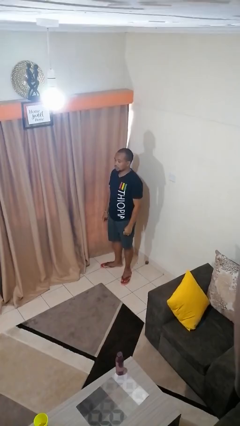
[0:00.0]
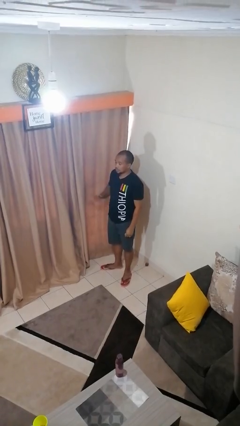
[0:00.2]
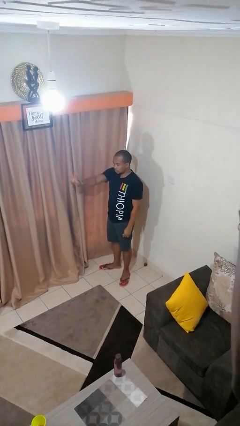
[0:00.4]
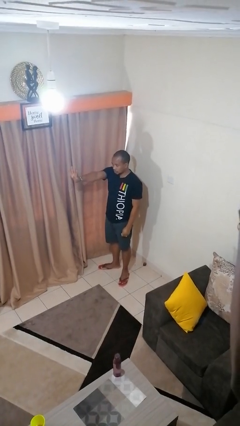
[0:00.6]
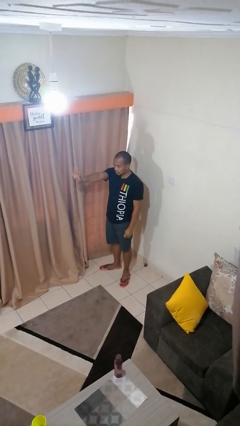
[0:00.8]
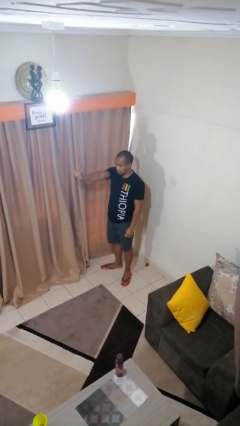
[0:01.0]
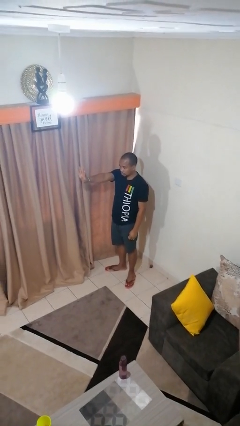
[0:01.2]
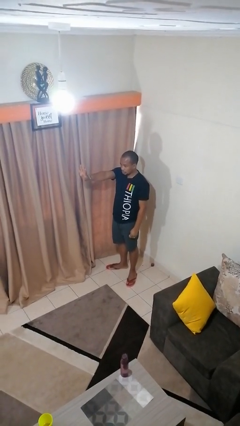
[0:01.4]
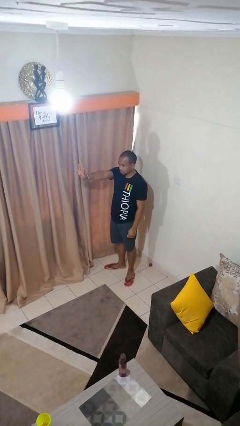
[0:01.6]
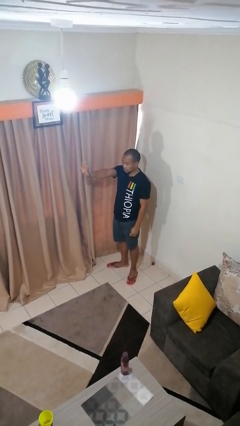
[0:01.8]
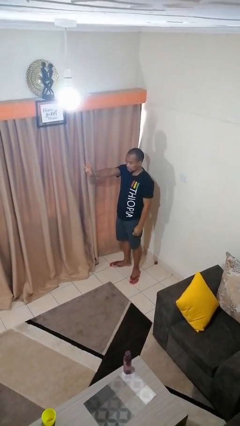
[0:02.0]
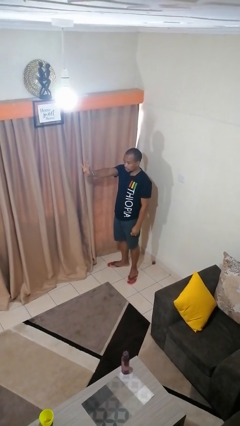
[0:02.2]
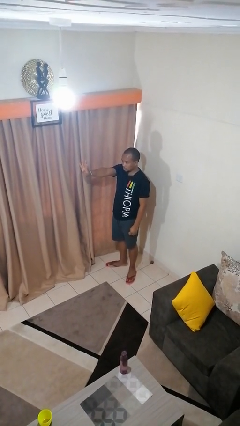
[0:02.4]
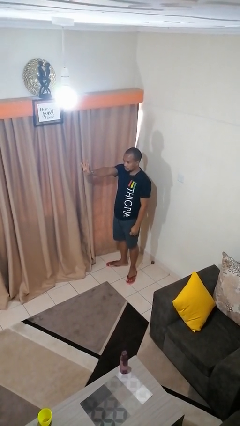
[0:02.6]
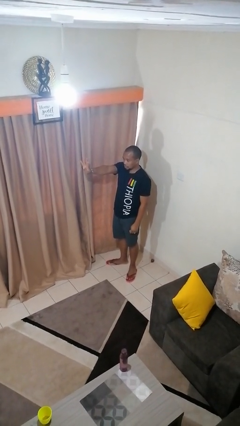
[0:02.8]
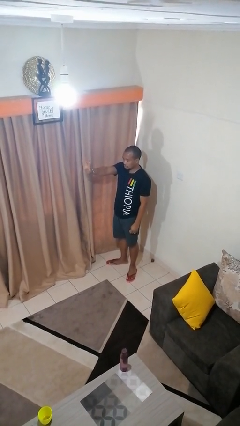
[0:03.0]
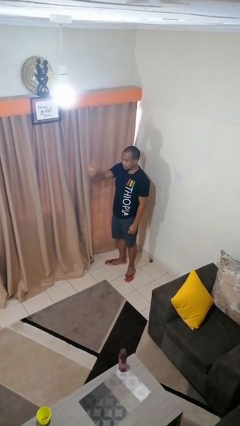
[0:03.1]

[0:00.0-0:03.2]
person gestures number four

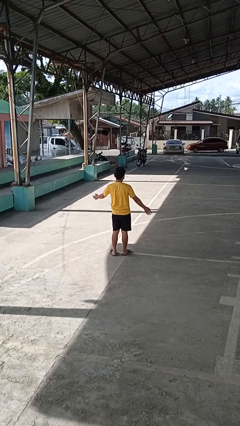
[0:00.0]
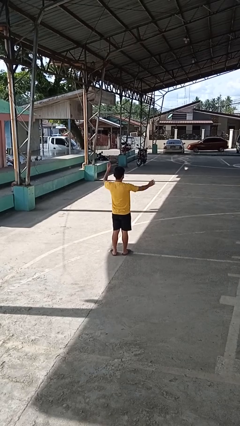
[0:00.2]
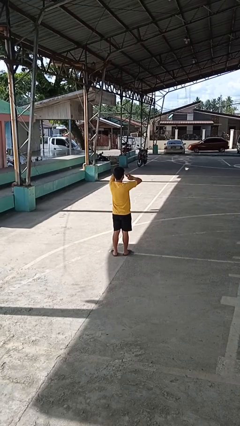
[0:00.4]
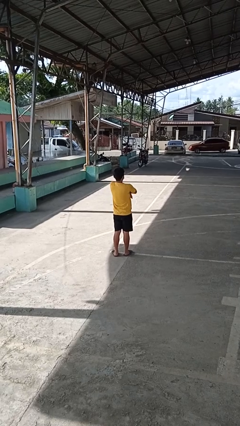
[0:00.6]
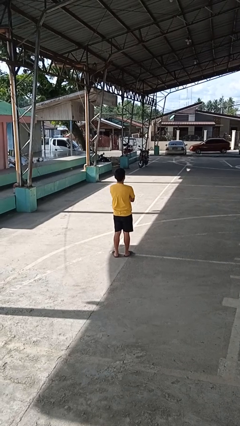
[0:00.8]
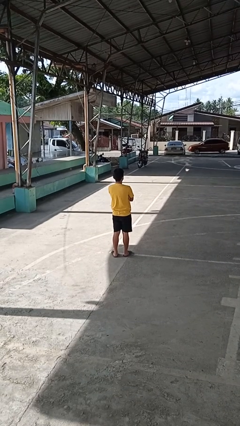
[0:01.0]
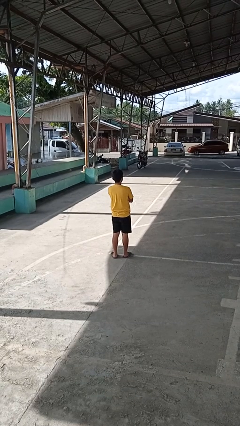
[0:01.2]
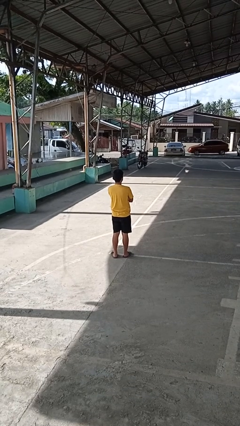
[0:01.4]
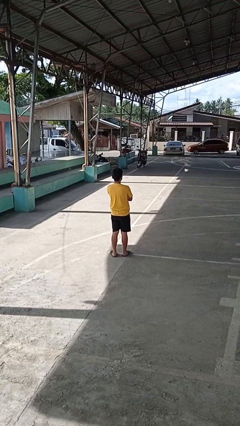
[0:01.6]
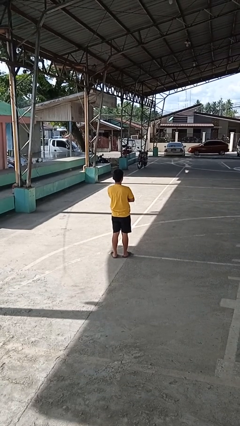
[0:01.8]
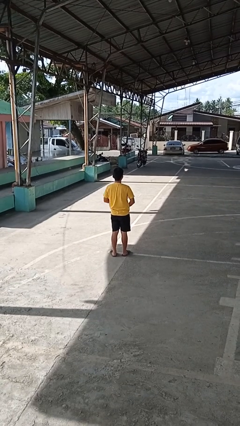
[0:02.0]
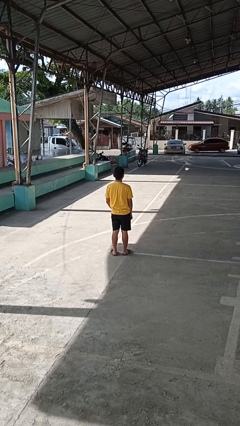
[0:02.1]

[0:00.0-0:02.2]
person crosses arms

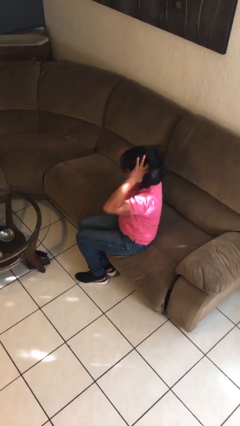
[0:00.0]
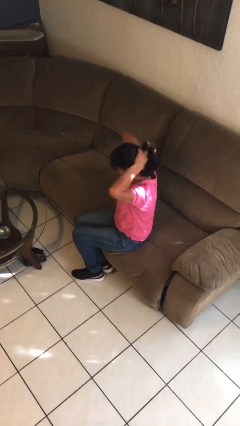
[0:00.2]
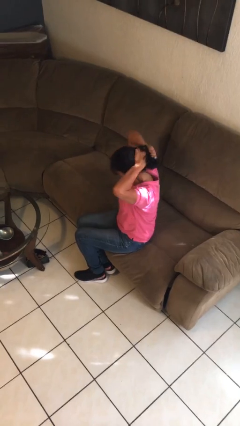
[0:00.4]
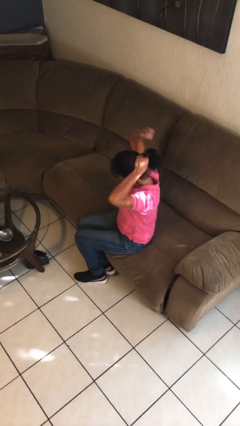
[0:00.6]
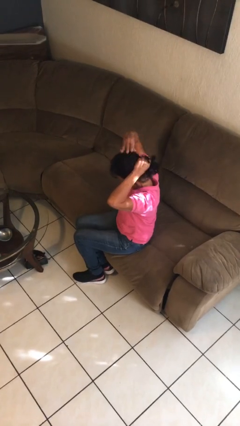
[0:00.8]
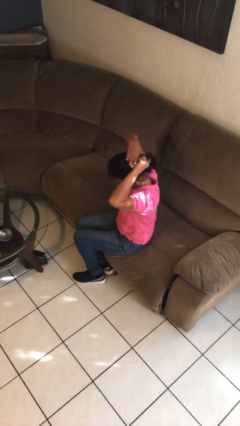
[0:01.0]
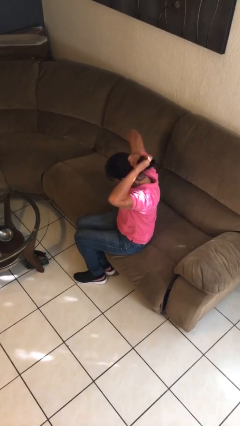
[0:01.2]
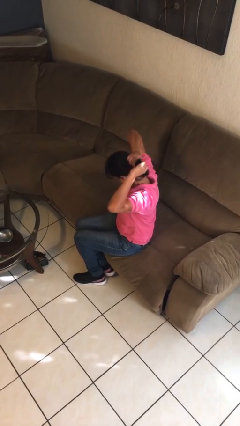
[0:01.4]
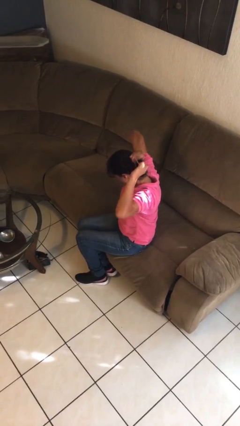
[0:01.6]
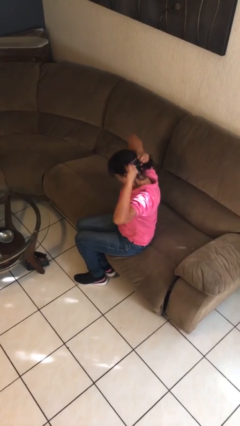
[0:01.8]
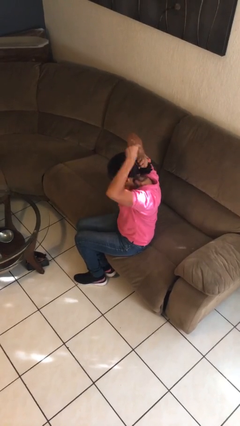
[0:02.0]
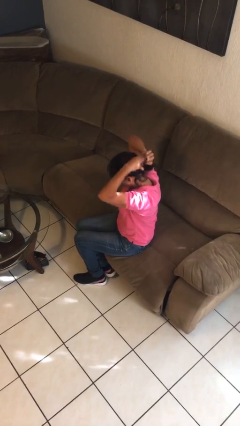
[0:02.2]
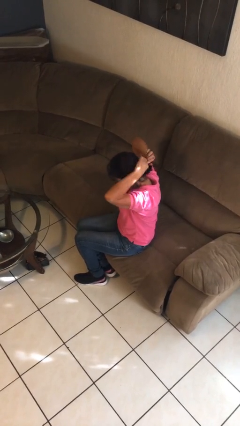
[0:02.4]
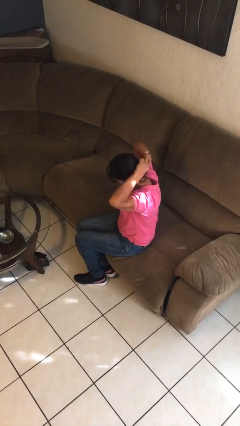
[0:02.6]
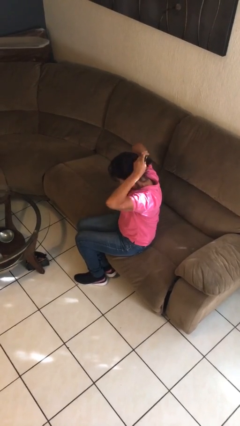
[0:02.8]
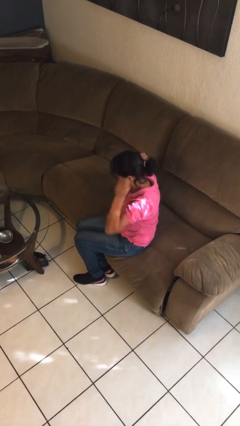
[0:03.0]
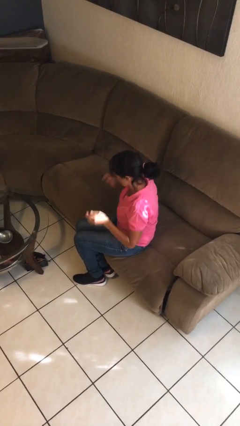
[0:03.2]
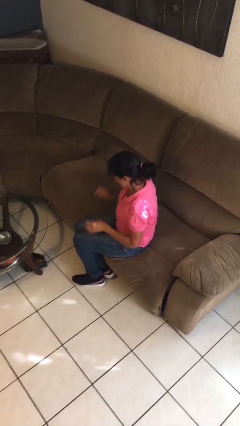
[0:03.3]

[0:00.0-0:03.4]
person puts hair in ponytail

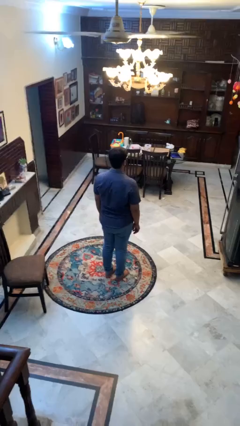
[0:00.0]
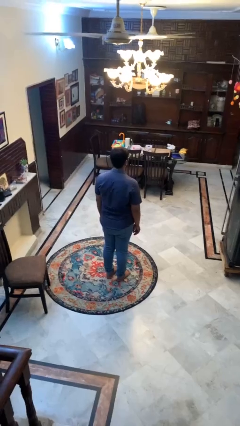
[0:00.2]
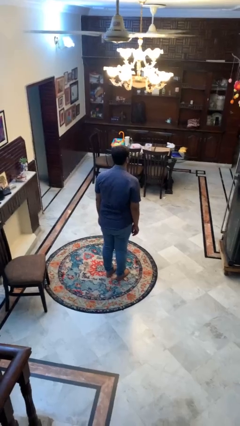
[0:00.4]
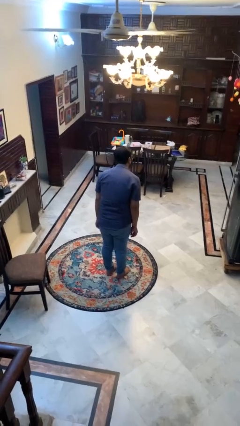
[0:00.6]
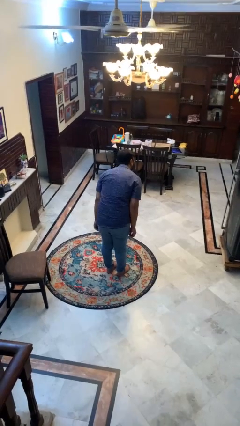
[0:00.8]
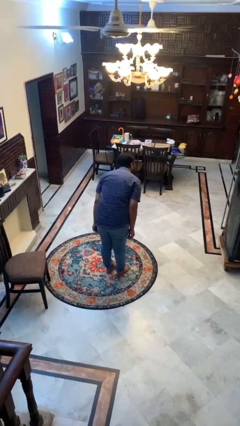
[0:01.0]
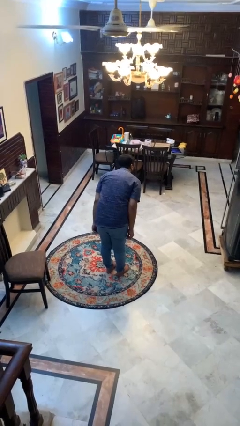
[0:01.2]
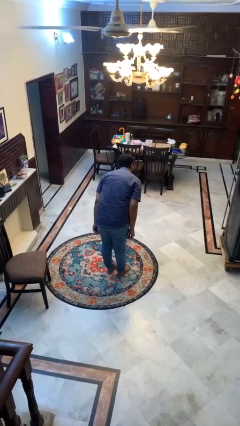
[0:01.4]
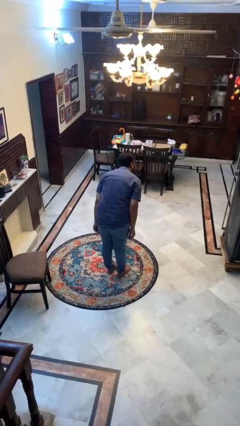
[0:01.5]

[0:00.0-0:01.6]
person bows

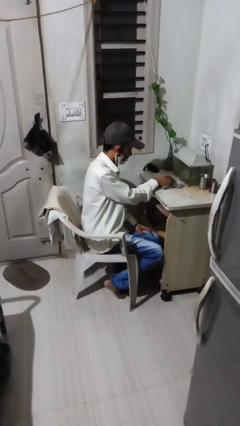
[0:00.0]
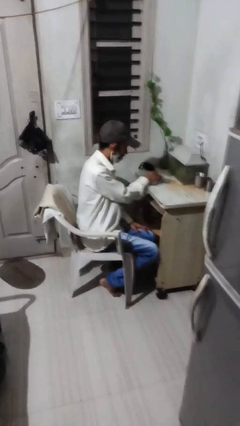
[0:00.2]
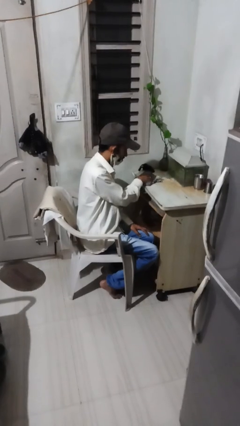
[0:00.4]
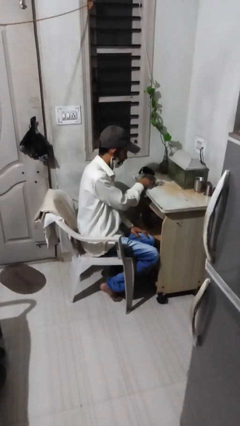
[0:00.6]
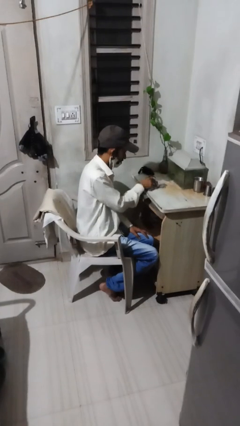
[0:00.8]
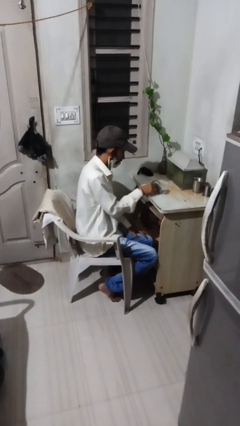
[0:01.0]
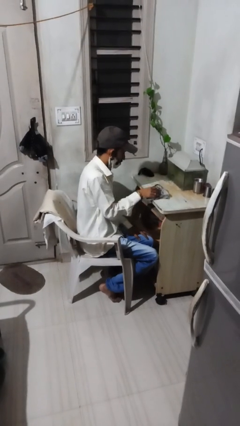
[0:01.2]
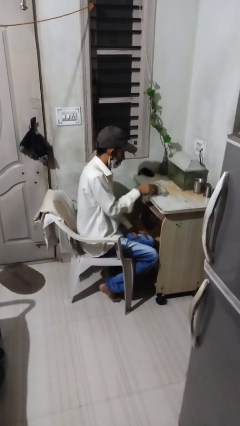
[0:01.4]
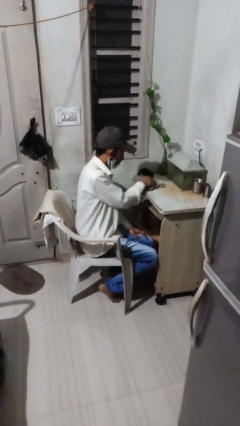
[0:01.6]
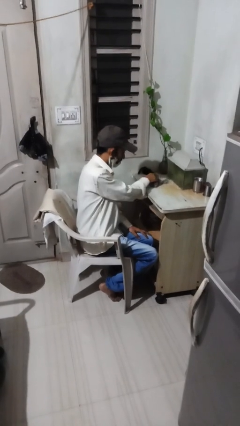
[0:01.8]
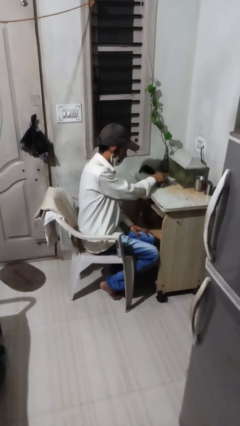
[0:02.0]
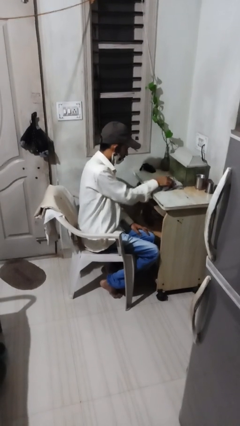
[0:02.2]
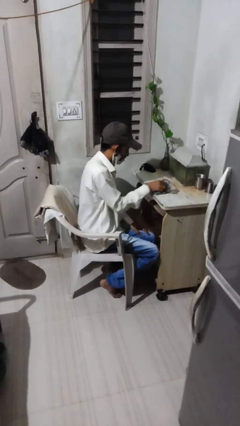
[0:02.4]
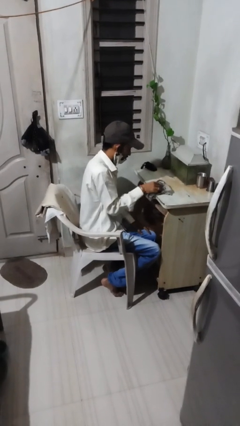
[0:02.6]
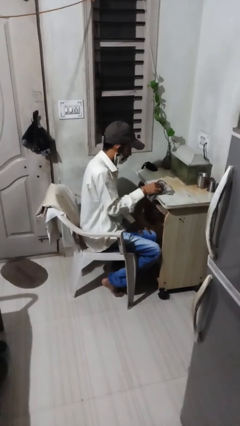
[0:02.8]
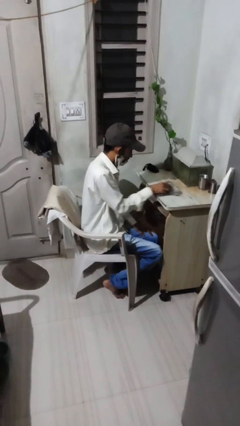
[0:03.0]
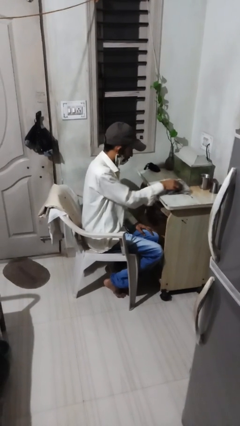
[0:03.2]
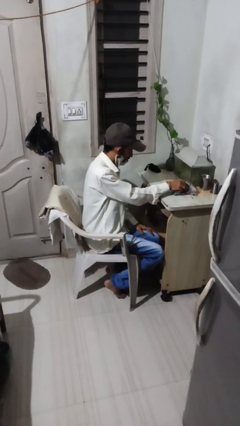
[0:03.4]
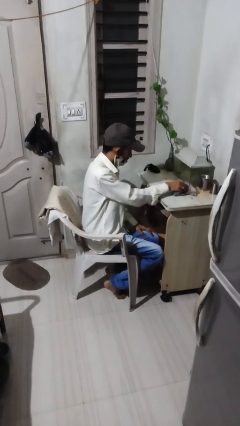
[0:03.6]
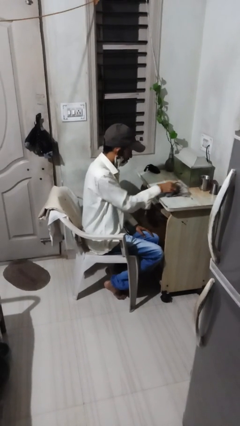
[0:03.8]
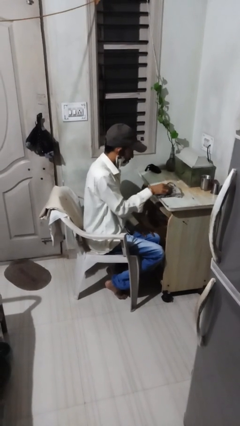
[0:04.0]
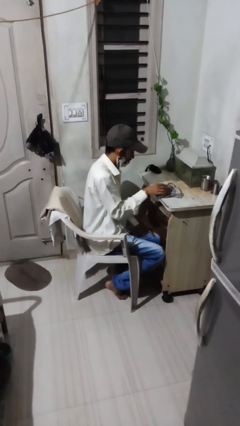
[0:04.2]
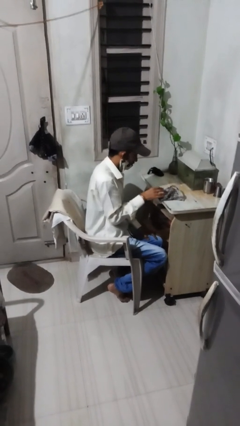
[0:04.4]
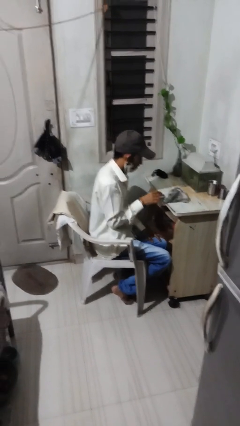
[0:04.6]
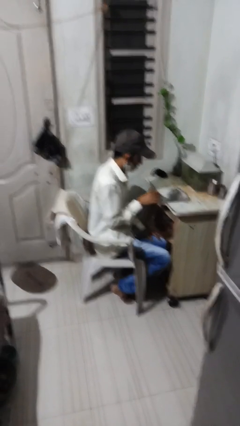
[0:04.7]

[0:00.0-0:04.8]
person cleans table with rag

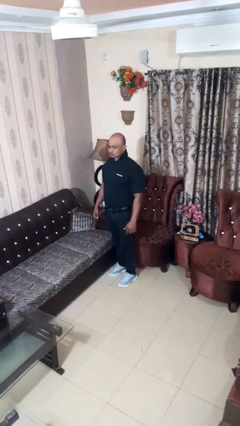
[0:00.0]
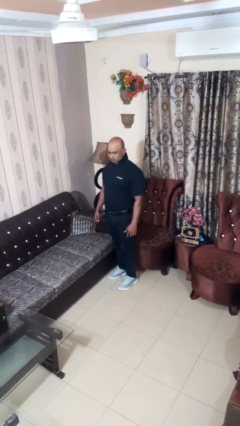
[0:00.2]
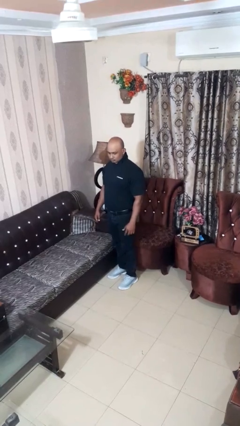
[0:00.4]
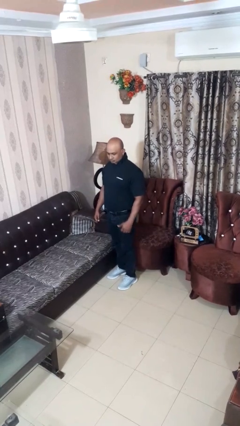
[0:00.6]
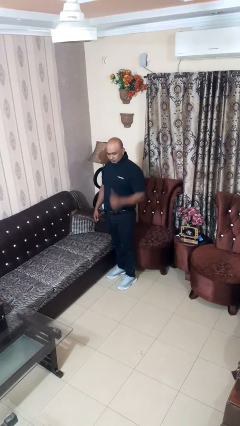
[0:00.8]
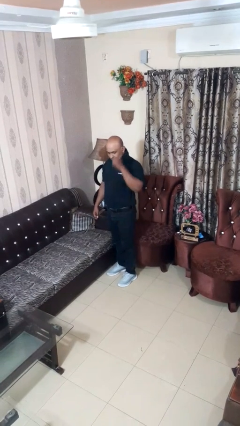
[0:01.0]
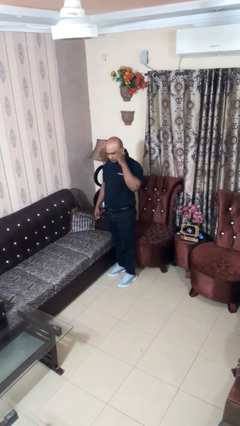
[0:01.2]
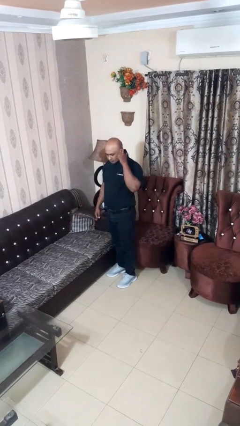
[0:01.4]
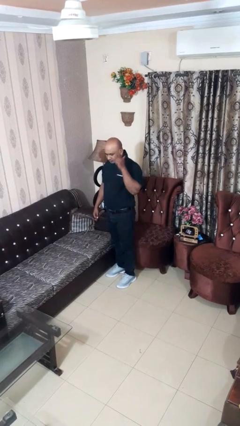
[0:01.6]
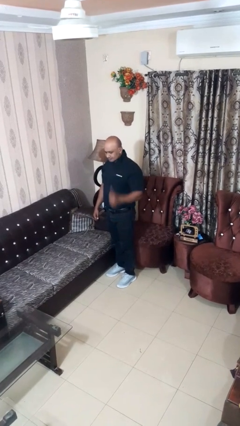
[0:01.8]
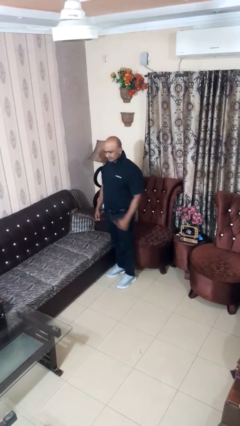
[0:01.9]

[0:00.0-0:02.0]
person gestures behind me

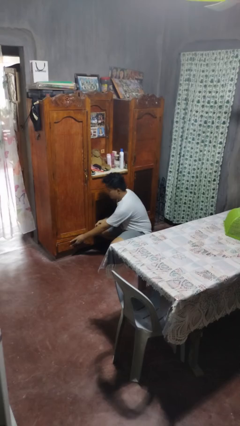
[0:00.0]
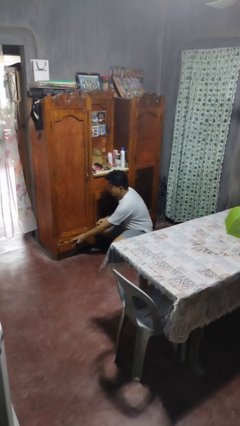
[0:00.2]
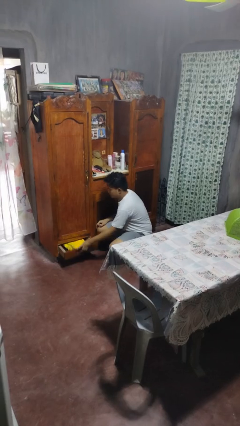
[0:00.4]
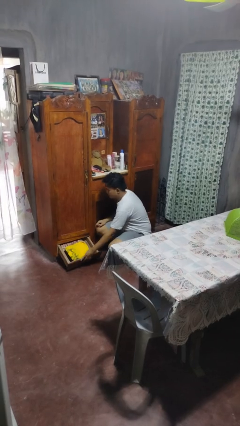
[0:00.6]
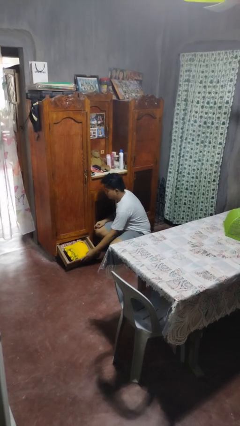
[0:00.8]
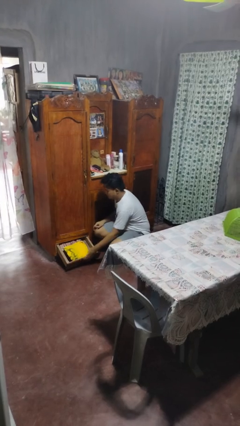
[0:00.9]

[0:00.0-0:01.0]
person opens dresser drawer
